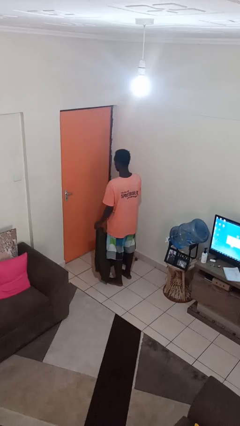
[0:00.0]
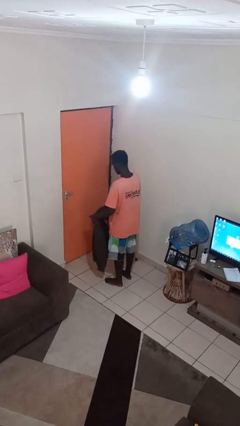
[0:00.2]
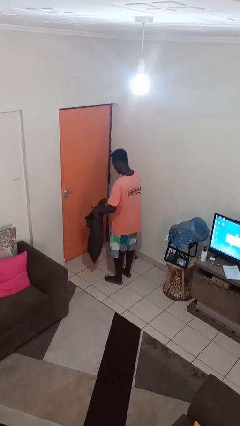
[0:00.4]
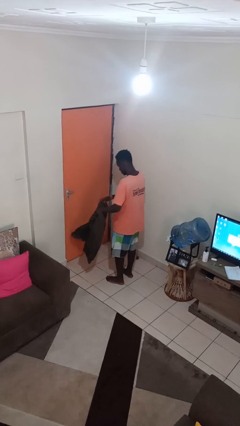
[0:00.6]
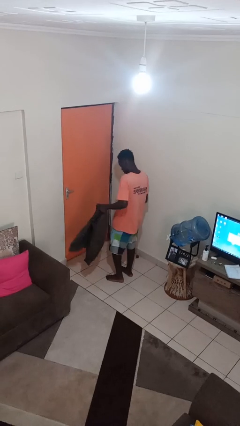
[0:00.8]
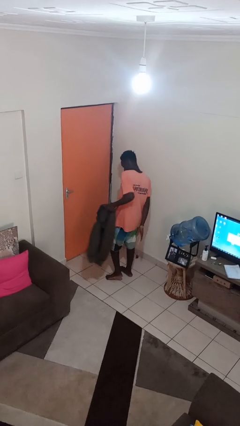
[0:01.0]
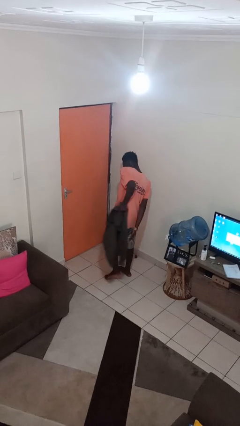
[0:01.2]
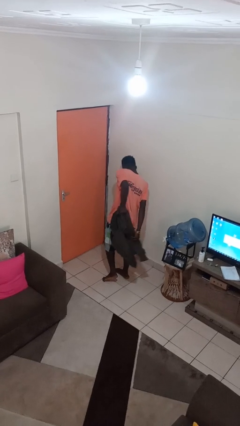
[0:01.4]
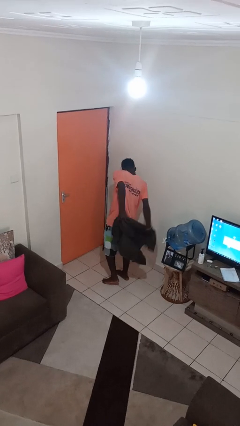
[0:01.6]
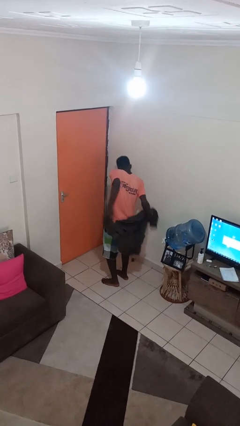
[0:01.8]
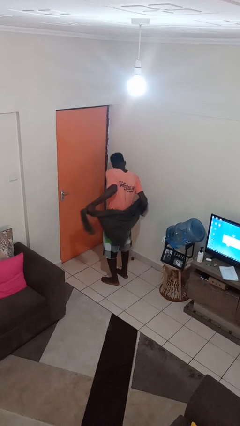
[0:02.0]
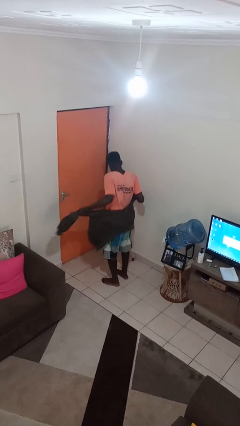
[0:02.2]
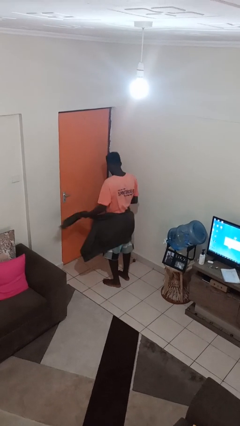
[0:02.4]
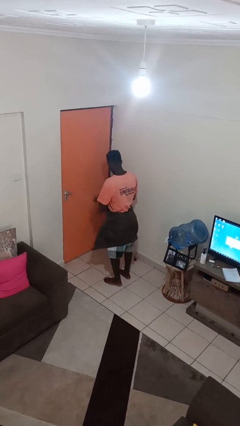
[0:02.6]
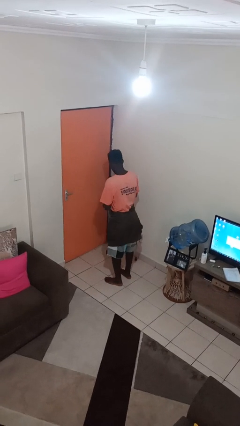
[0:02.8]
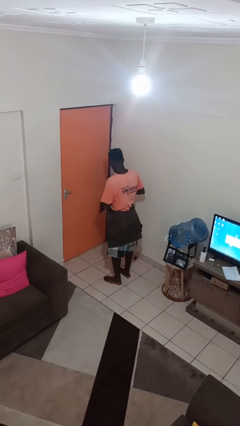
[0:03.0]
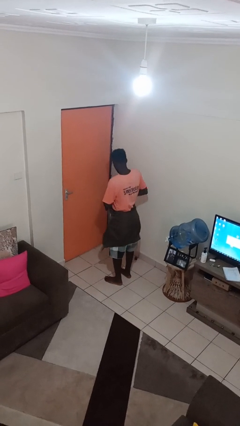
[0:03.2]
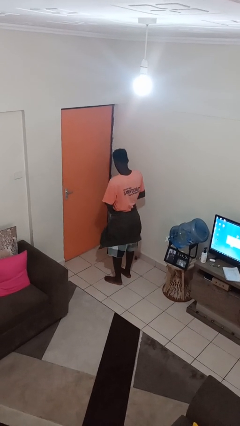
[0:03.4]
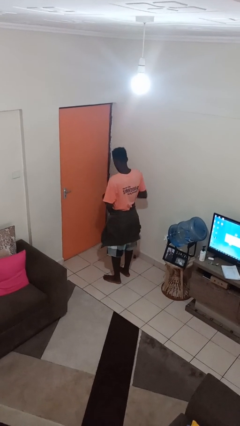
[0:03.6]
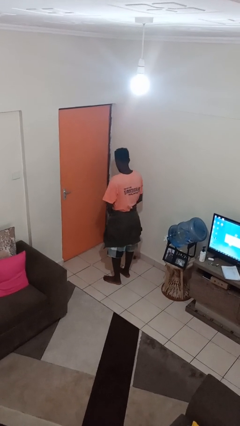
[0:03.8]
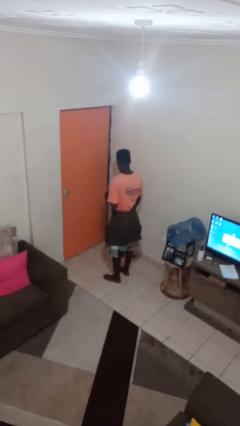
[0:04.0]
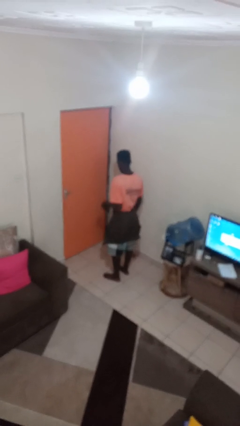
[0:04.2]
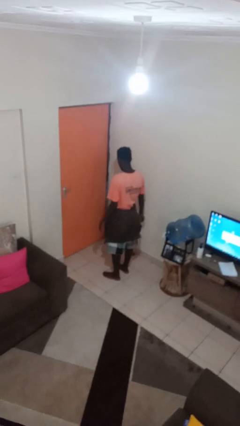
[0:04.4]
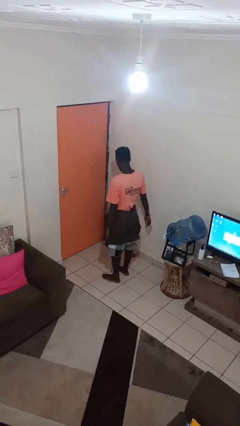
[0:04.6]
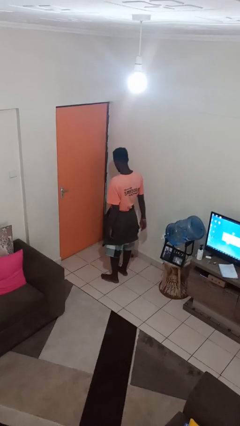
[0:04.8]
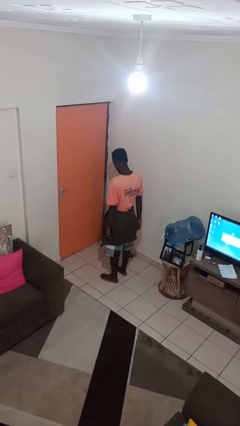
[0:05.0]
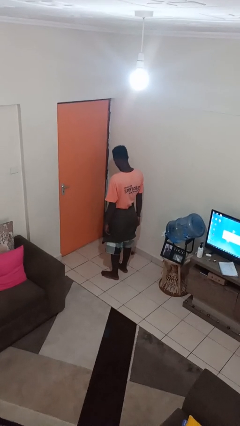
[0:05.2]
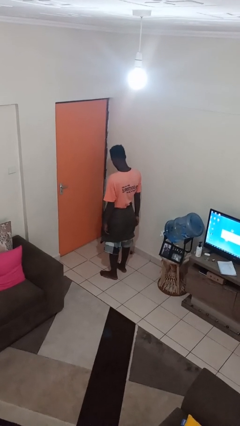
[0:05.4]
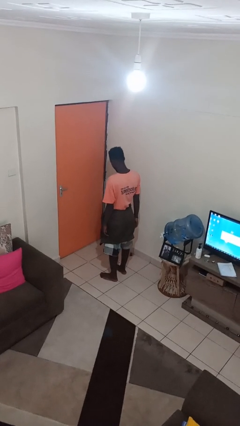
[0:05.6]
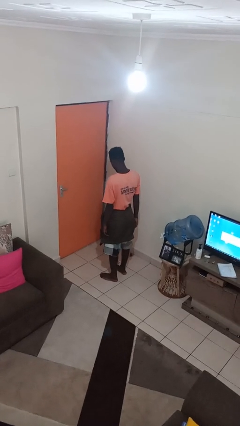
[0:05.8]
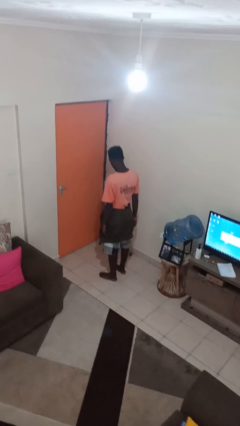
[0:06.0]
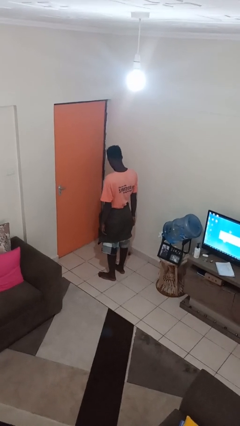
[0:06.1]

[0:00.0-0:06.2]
person ties jacket around waist

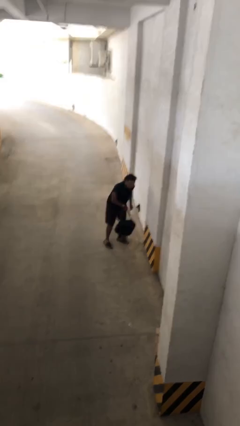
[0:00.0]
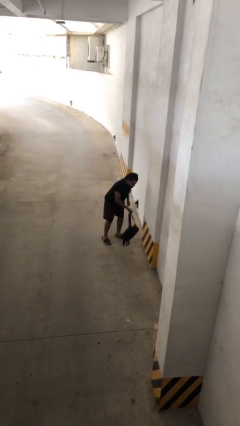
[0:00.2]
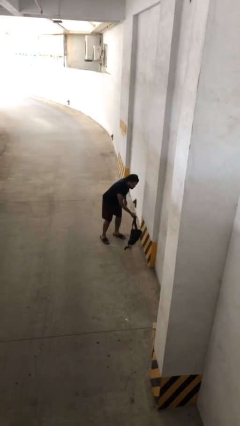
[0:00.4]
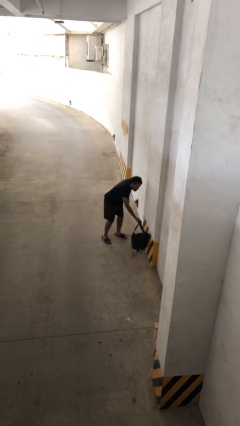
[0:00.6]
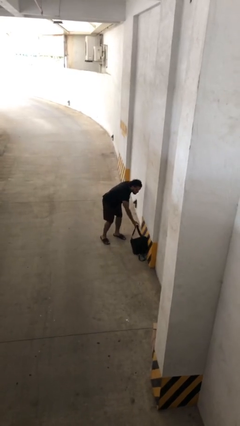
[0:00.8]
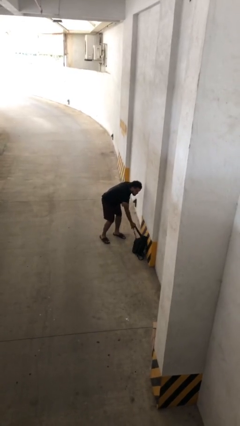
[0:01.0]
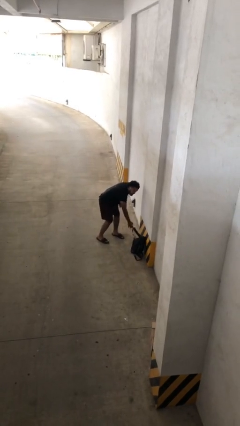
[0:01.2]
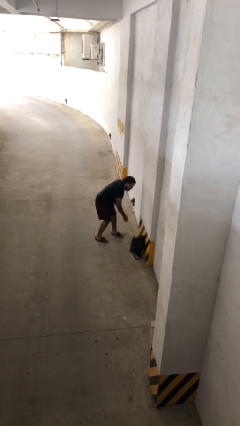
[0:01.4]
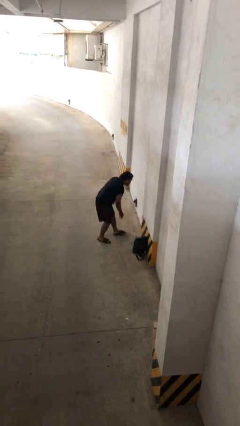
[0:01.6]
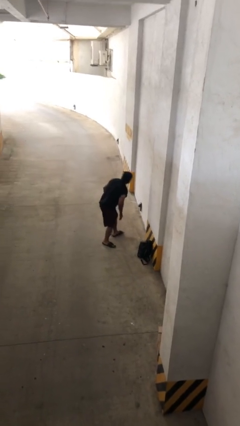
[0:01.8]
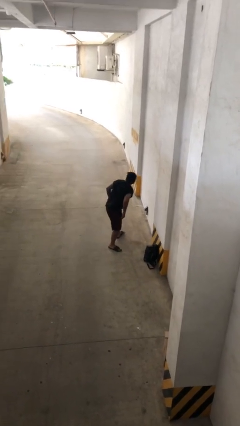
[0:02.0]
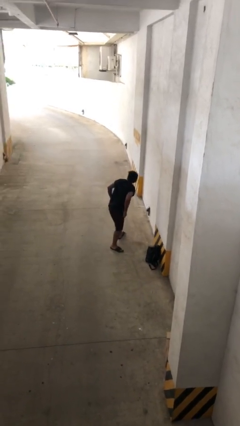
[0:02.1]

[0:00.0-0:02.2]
person puts down object on floor

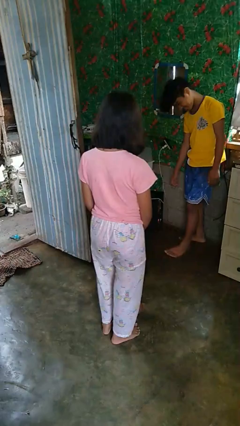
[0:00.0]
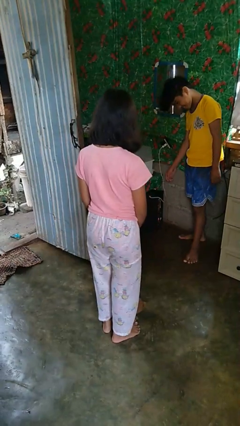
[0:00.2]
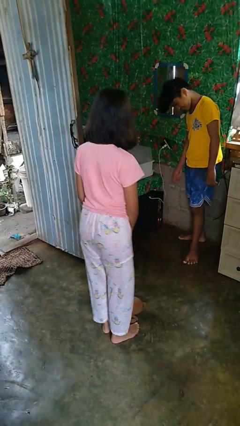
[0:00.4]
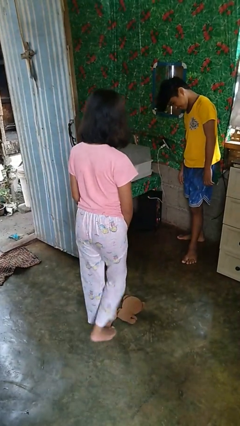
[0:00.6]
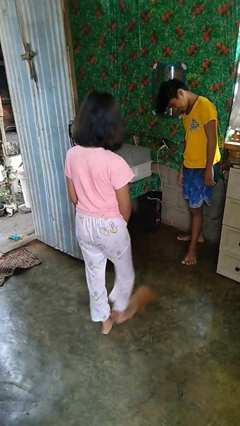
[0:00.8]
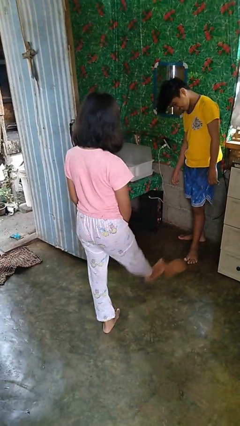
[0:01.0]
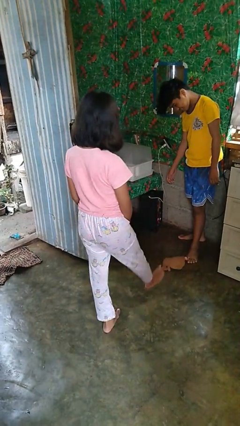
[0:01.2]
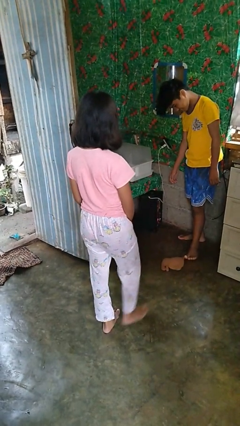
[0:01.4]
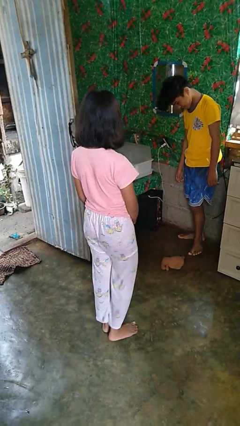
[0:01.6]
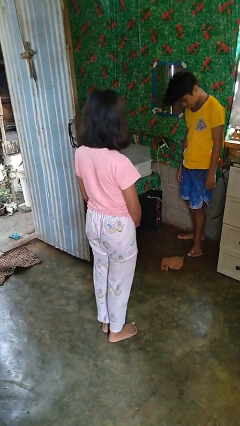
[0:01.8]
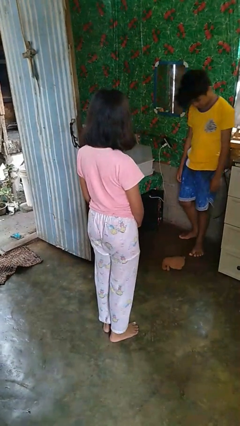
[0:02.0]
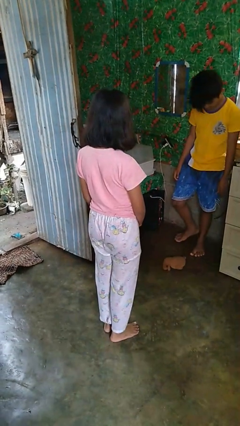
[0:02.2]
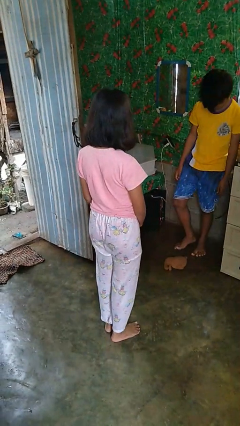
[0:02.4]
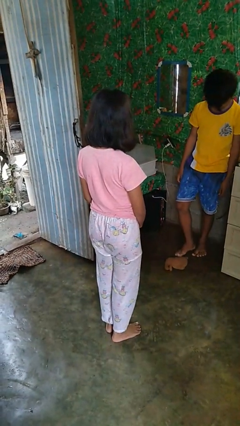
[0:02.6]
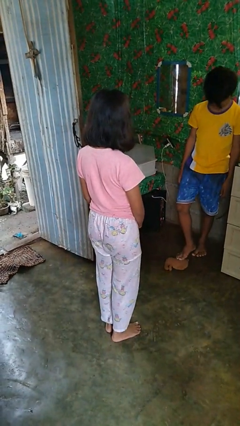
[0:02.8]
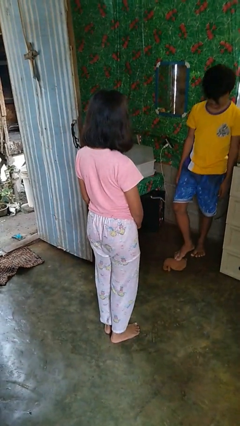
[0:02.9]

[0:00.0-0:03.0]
person kicks object to person

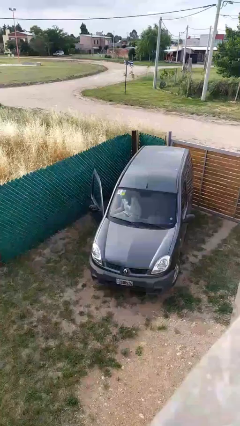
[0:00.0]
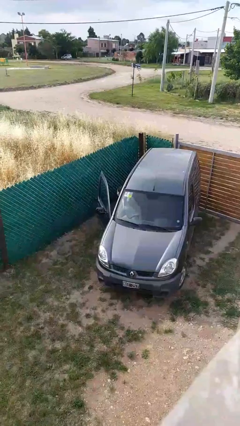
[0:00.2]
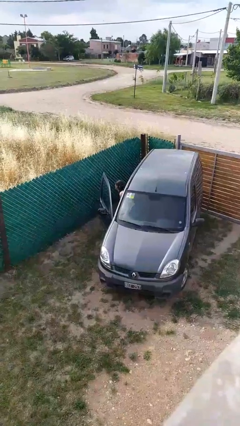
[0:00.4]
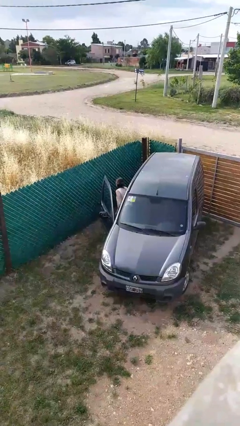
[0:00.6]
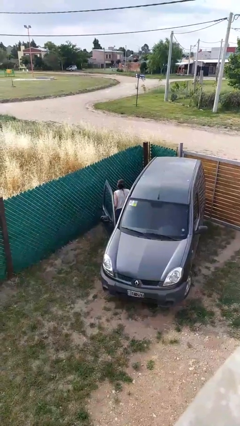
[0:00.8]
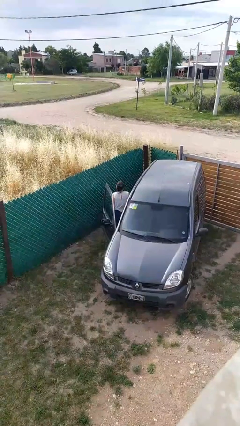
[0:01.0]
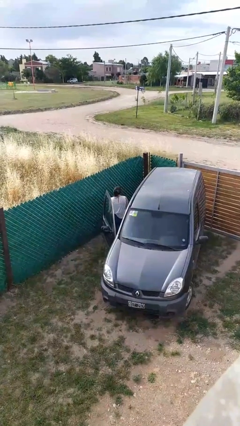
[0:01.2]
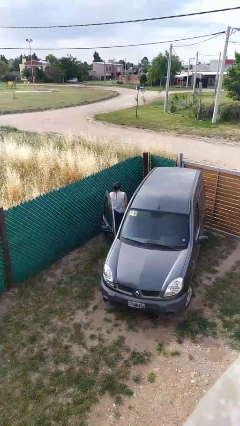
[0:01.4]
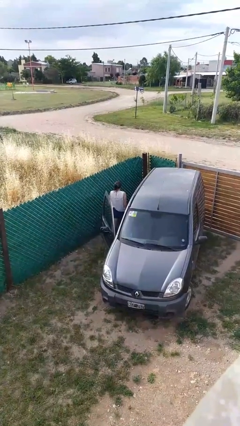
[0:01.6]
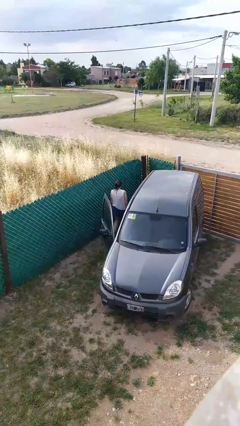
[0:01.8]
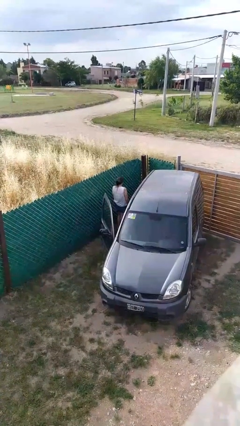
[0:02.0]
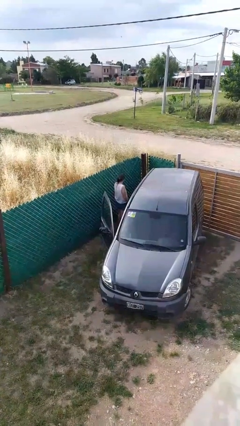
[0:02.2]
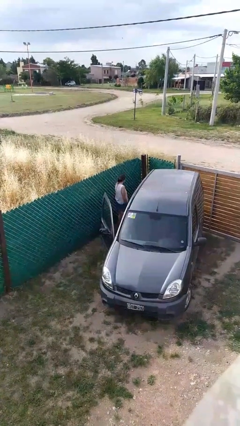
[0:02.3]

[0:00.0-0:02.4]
person exits car

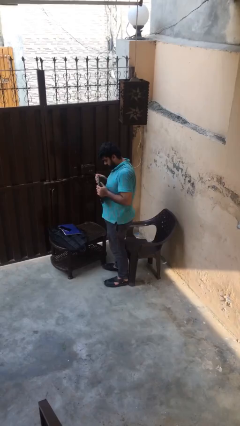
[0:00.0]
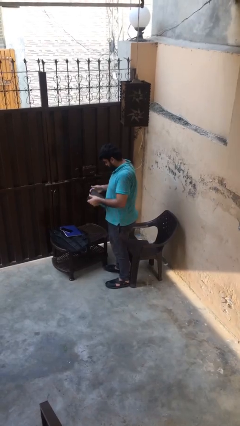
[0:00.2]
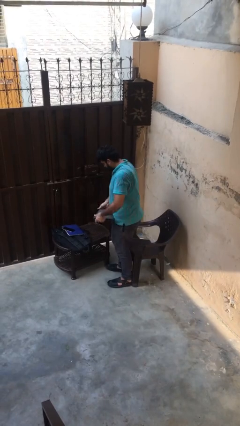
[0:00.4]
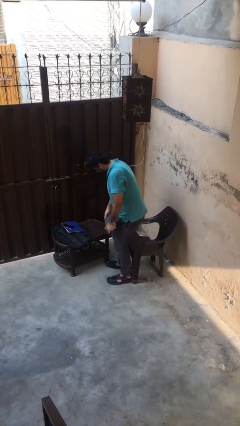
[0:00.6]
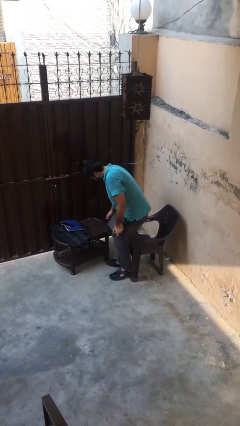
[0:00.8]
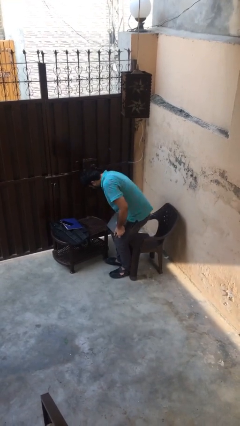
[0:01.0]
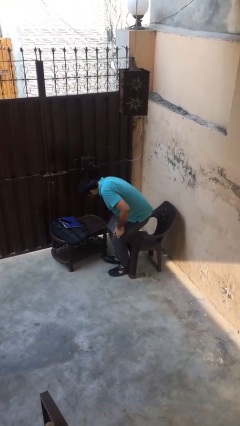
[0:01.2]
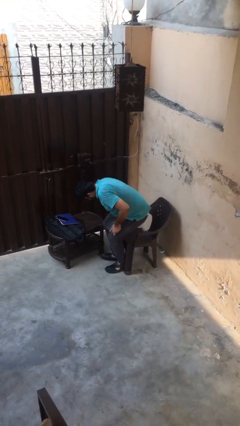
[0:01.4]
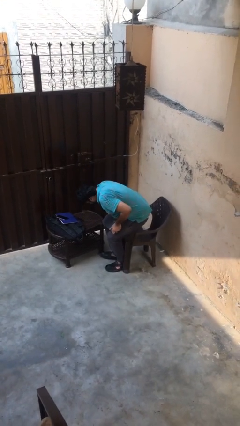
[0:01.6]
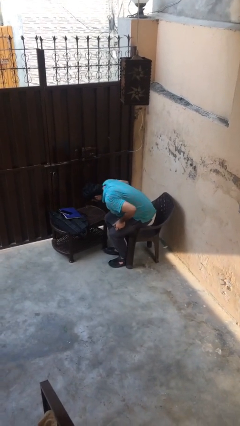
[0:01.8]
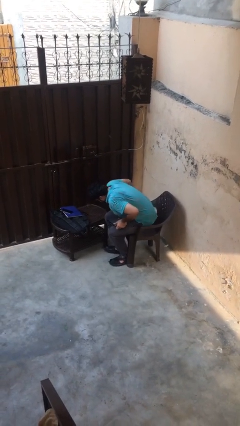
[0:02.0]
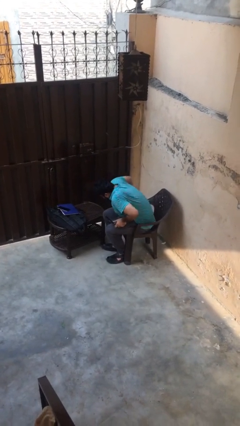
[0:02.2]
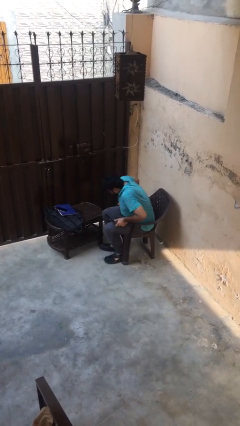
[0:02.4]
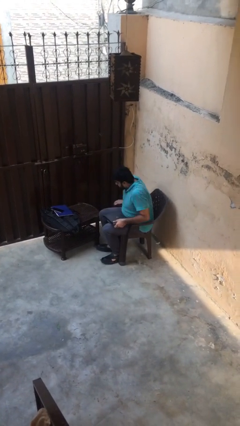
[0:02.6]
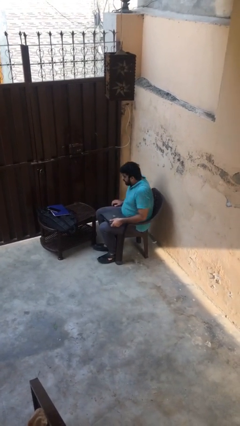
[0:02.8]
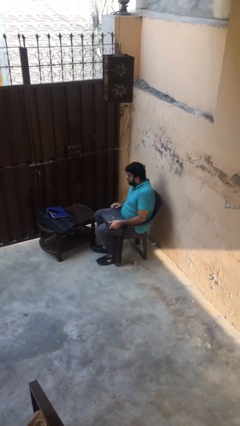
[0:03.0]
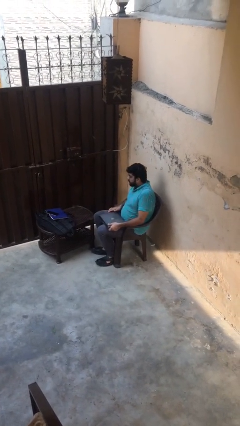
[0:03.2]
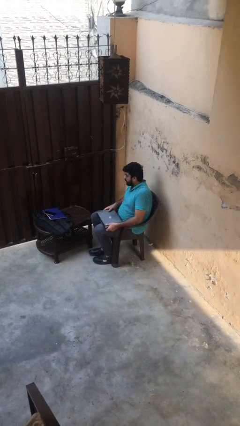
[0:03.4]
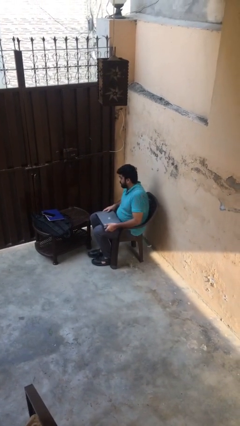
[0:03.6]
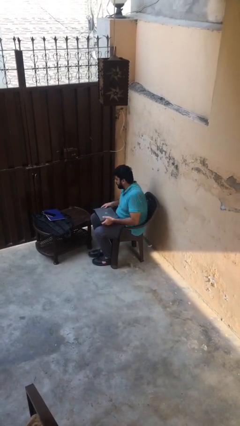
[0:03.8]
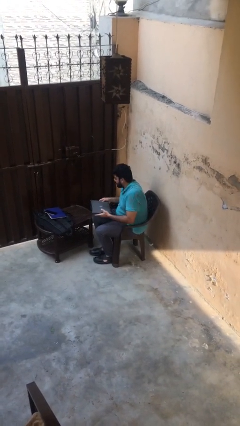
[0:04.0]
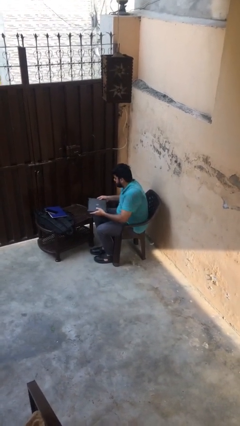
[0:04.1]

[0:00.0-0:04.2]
person sits down
